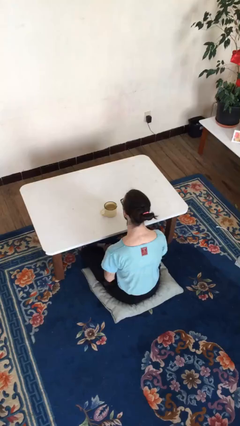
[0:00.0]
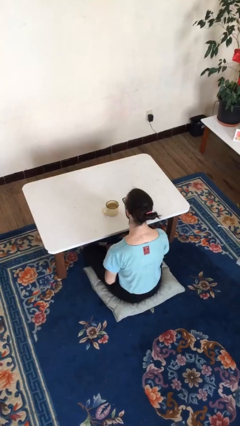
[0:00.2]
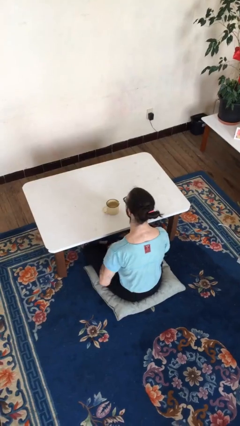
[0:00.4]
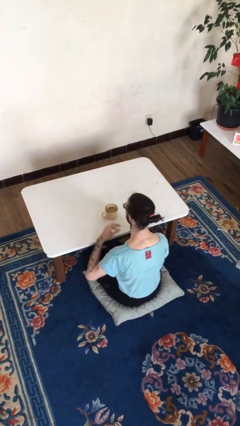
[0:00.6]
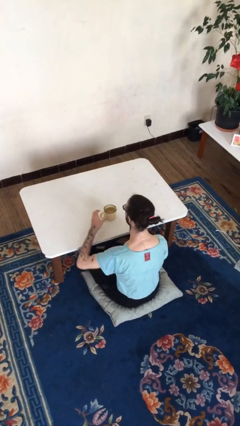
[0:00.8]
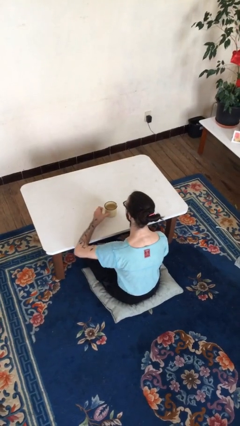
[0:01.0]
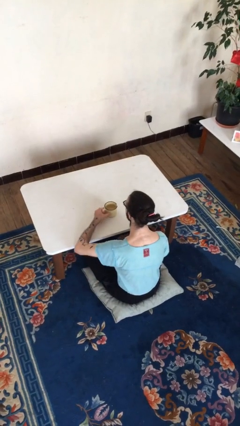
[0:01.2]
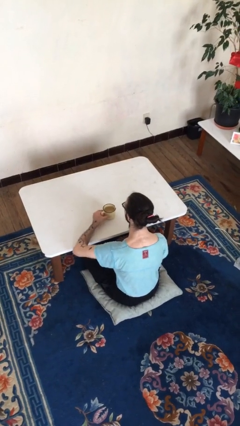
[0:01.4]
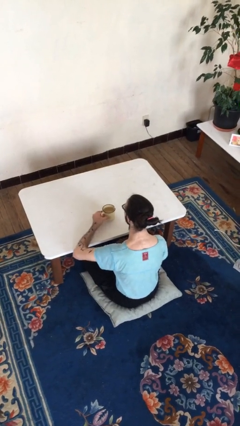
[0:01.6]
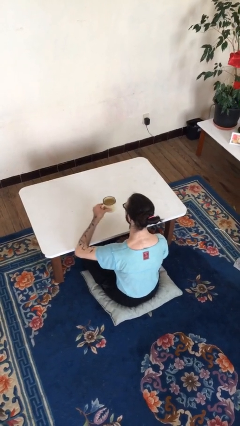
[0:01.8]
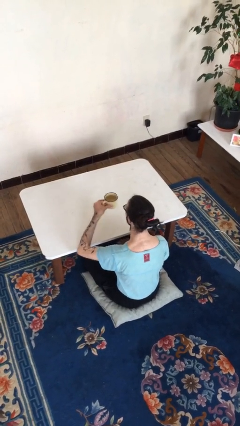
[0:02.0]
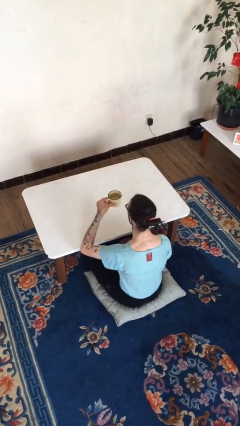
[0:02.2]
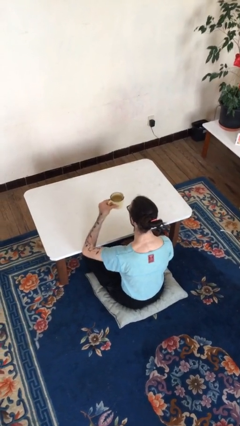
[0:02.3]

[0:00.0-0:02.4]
person picks up object from table

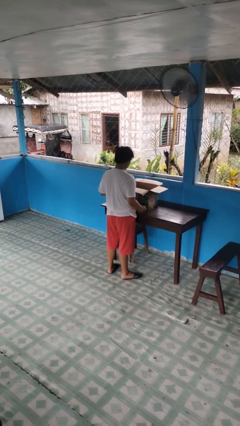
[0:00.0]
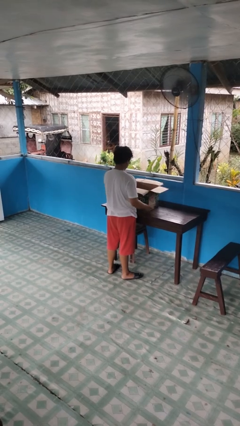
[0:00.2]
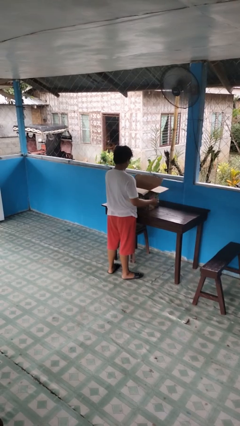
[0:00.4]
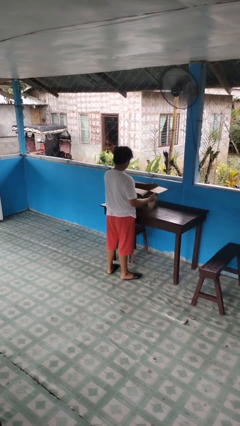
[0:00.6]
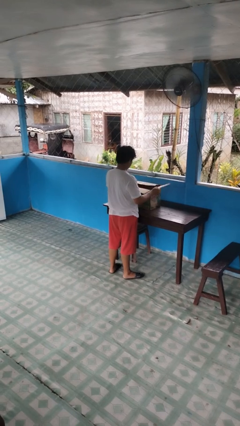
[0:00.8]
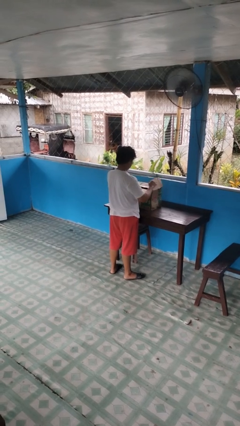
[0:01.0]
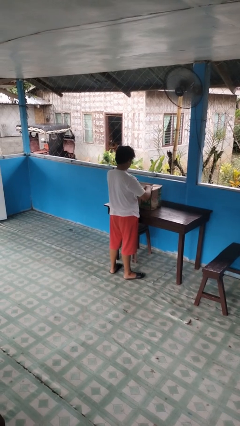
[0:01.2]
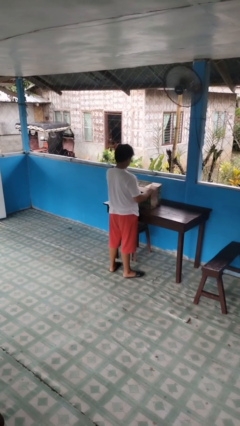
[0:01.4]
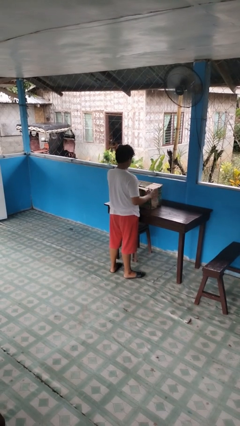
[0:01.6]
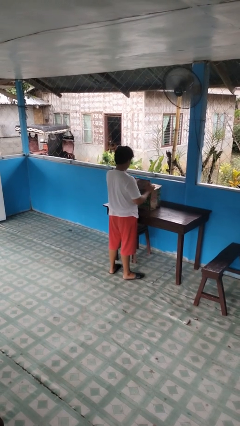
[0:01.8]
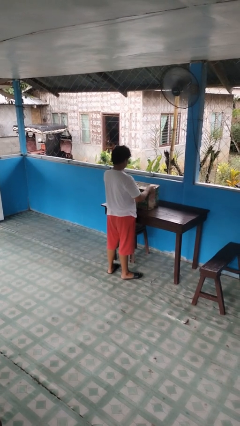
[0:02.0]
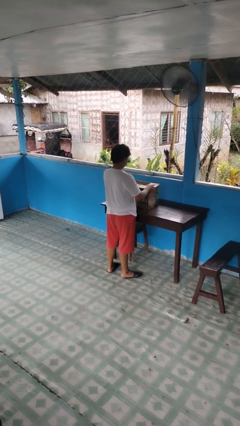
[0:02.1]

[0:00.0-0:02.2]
person closes box

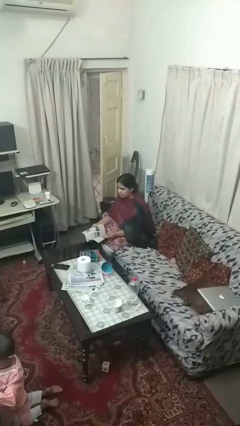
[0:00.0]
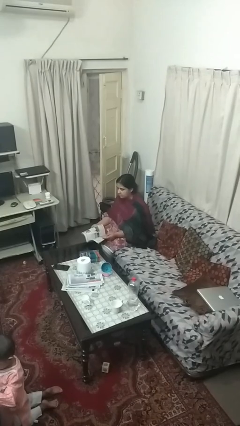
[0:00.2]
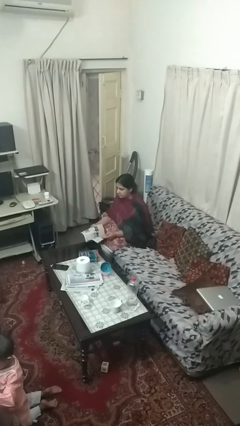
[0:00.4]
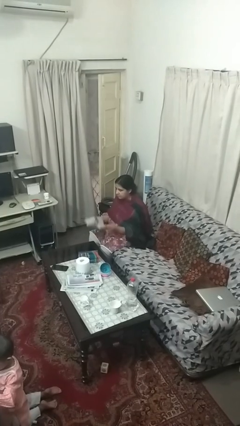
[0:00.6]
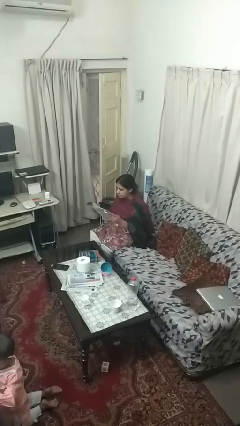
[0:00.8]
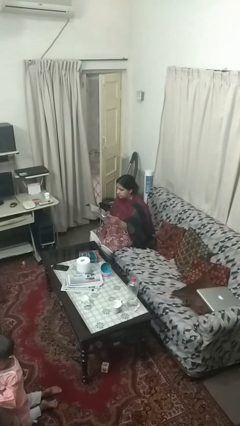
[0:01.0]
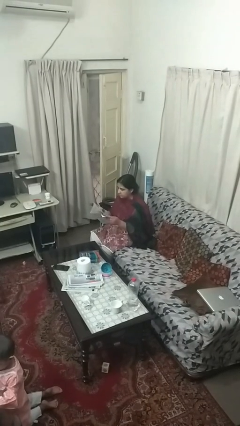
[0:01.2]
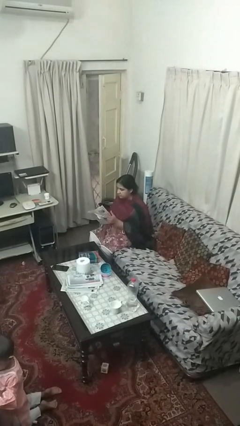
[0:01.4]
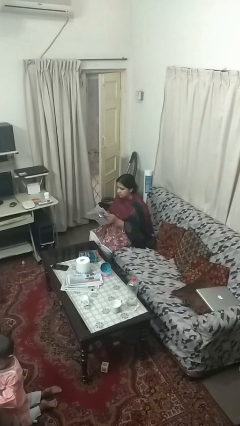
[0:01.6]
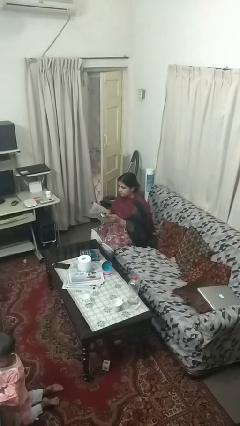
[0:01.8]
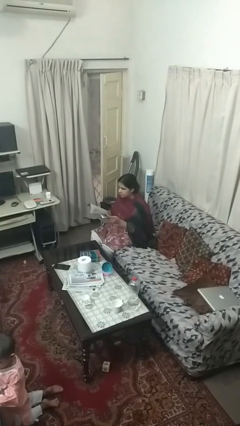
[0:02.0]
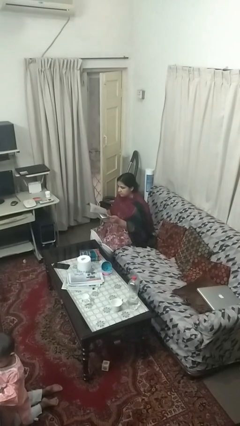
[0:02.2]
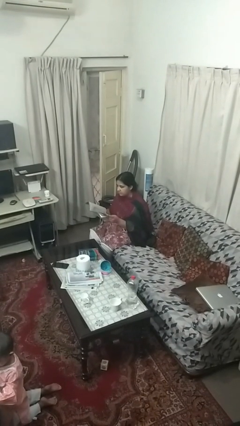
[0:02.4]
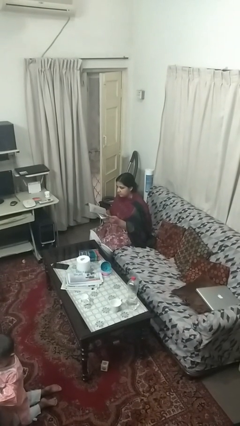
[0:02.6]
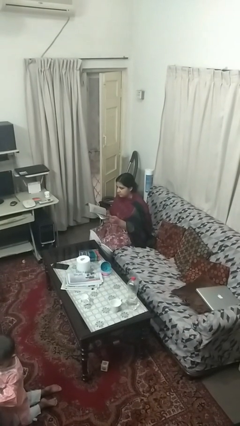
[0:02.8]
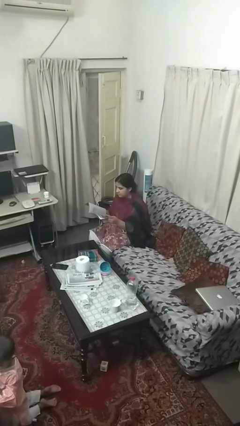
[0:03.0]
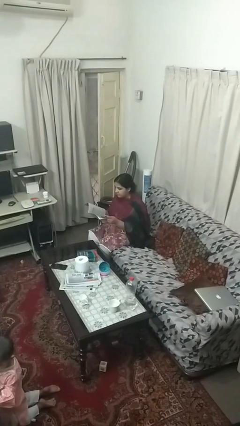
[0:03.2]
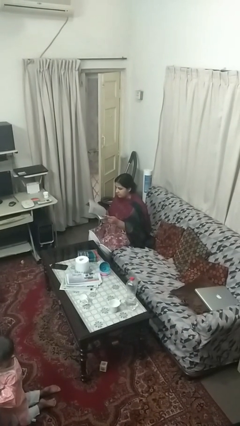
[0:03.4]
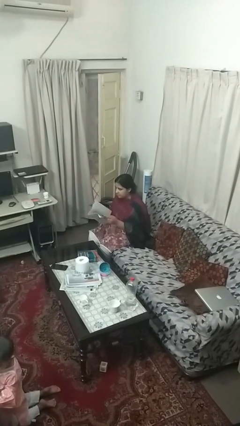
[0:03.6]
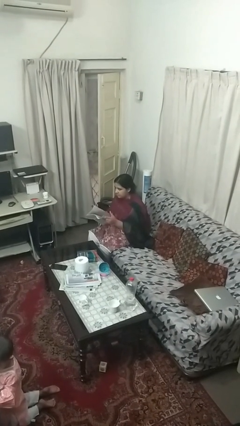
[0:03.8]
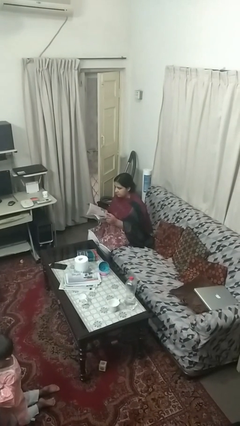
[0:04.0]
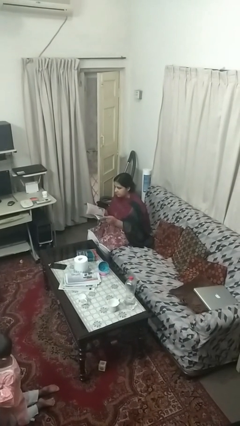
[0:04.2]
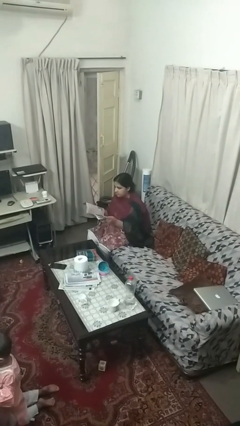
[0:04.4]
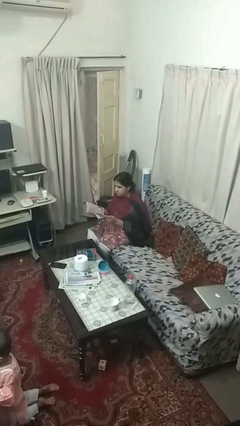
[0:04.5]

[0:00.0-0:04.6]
person reads magazine

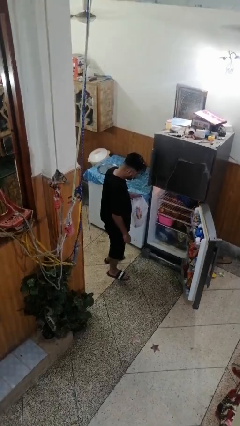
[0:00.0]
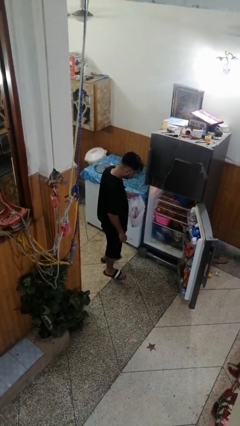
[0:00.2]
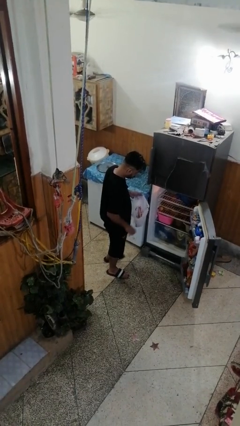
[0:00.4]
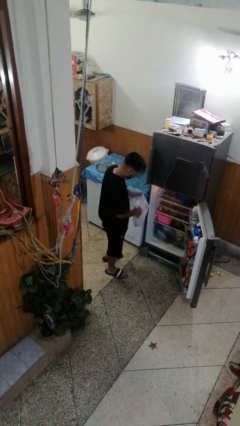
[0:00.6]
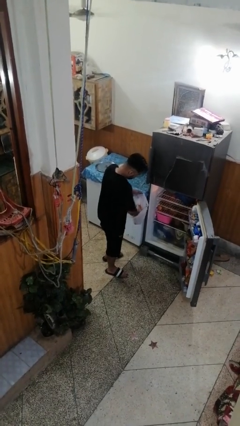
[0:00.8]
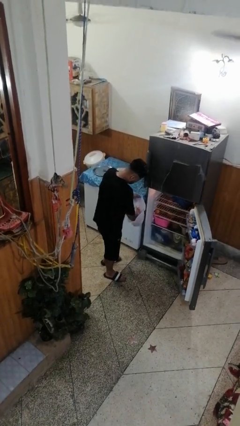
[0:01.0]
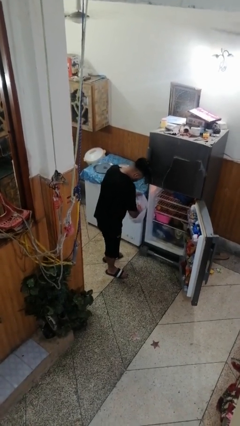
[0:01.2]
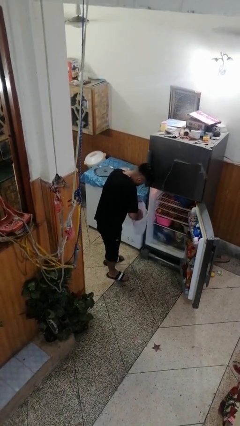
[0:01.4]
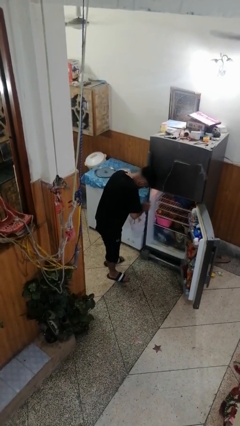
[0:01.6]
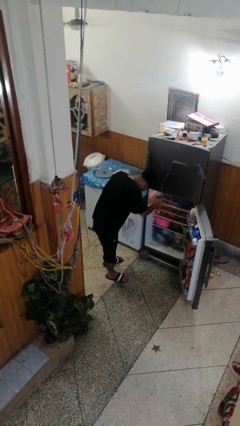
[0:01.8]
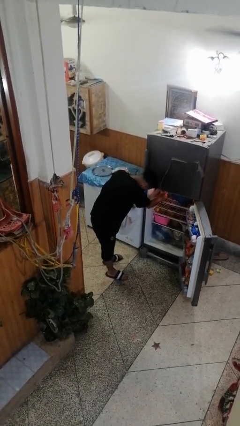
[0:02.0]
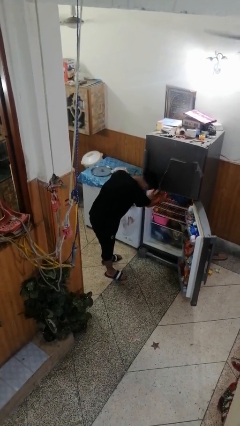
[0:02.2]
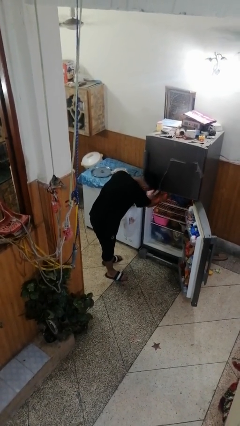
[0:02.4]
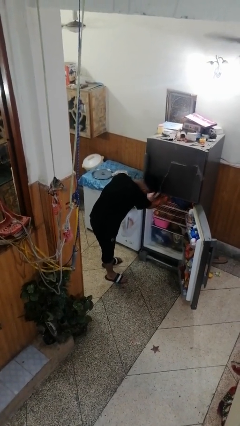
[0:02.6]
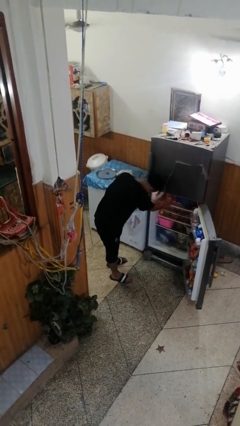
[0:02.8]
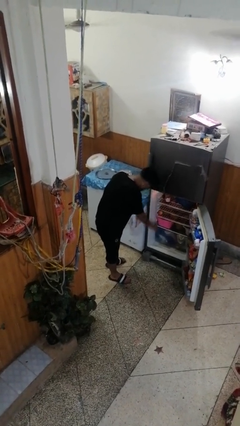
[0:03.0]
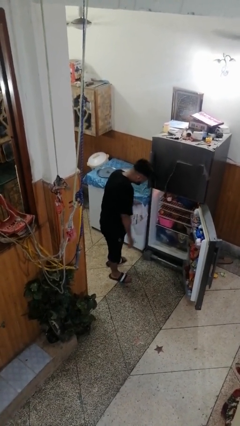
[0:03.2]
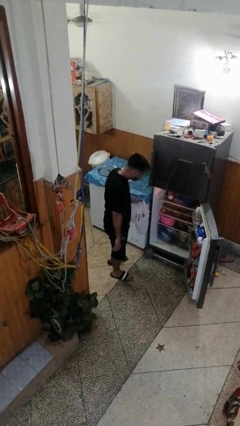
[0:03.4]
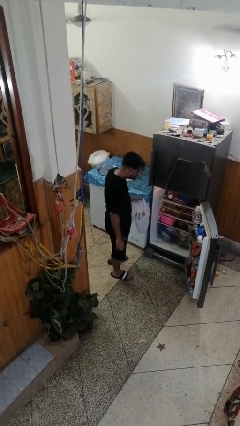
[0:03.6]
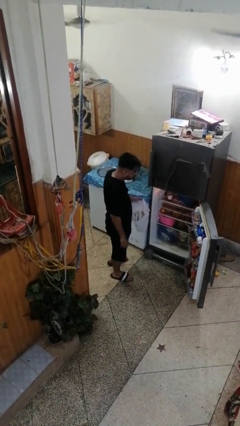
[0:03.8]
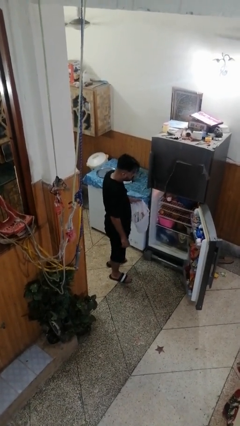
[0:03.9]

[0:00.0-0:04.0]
person loads groceries into refrigerator

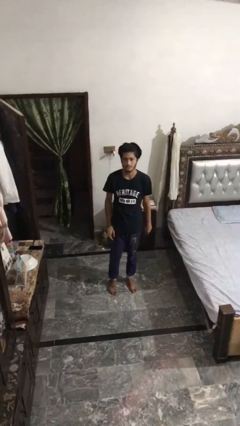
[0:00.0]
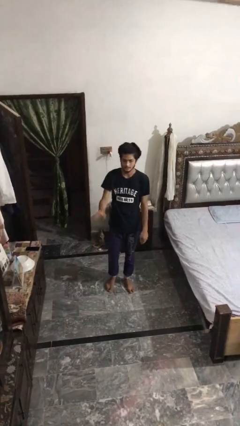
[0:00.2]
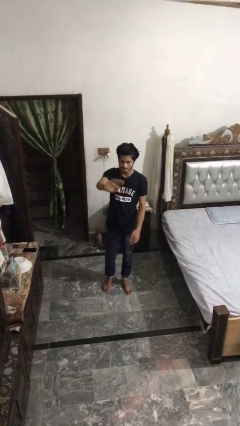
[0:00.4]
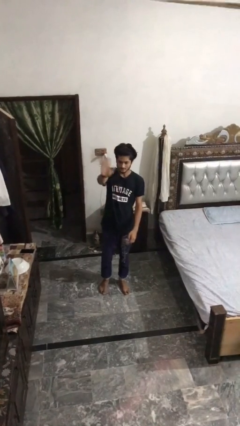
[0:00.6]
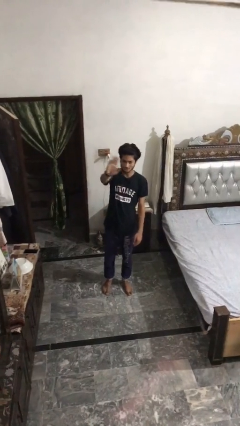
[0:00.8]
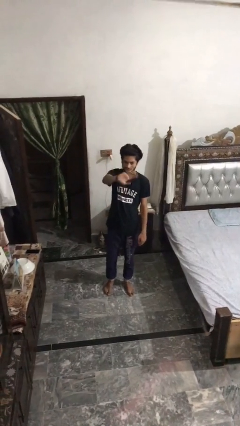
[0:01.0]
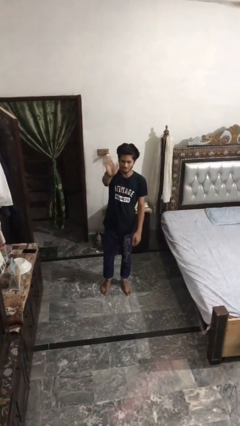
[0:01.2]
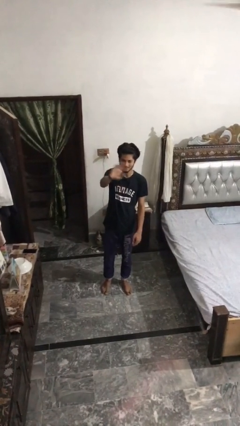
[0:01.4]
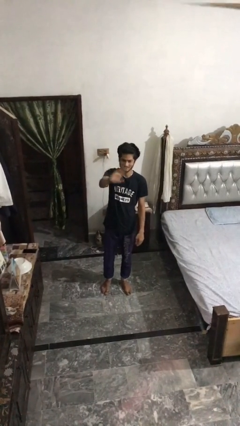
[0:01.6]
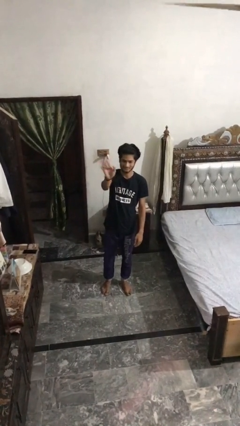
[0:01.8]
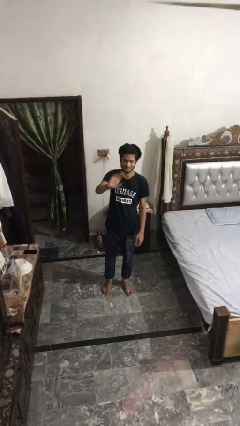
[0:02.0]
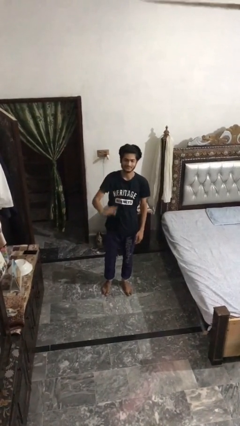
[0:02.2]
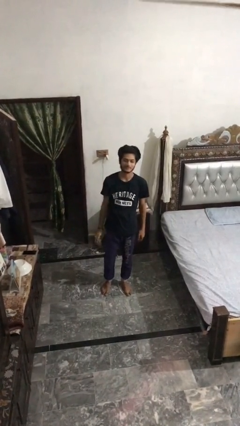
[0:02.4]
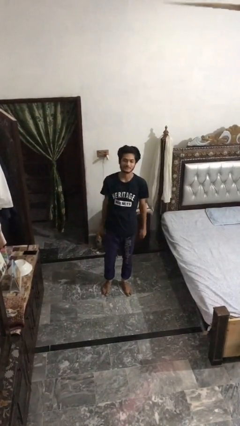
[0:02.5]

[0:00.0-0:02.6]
person waves at person

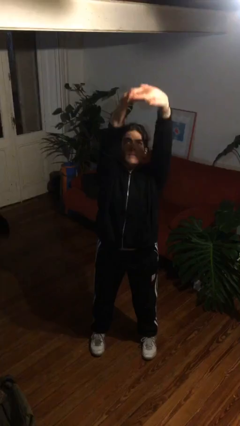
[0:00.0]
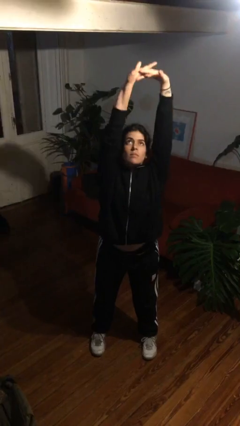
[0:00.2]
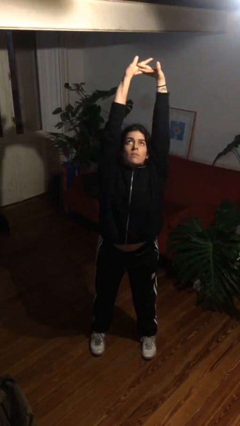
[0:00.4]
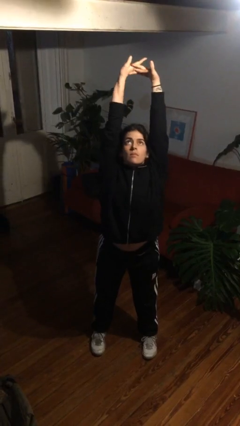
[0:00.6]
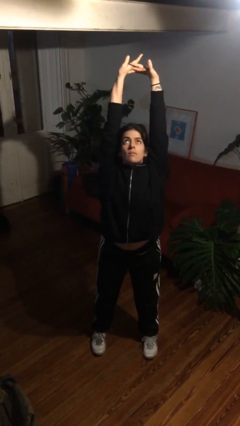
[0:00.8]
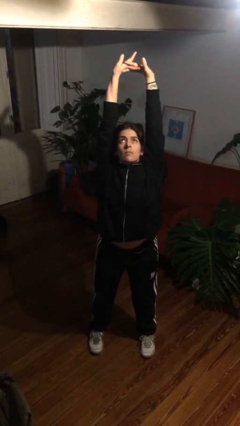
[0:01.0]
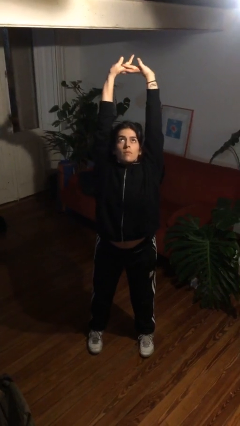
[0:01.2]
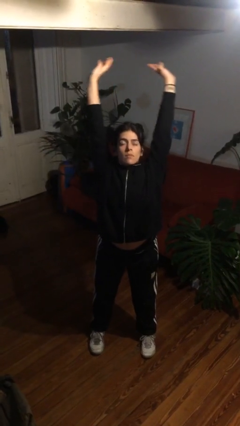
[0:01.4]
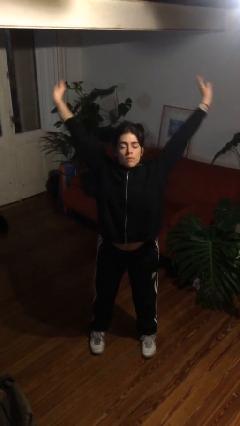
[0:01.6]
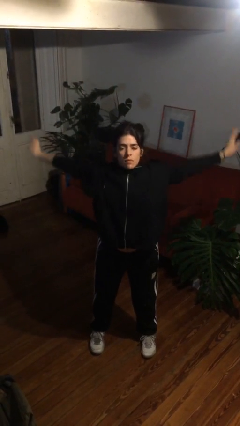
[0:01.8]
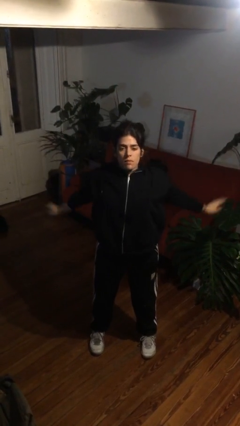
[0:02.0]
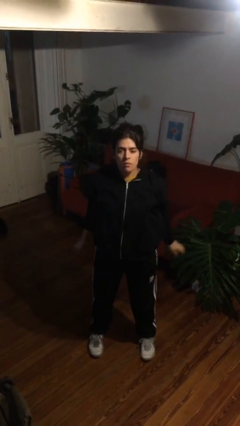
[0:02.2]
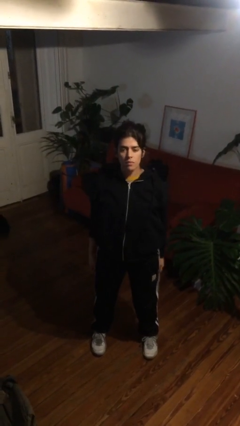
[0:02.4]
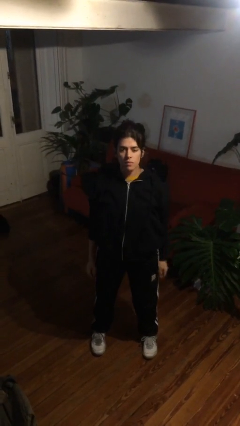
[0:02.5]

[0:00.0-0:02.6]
person stretches arms over head
